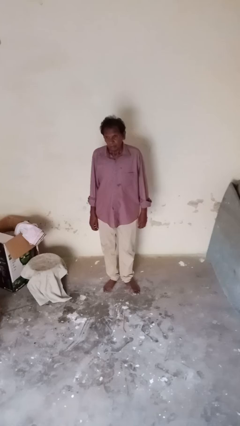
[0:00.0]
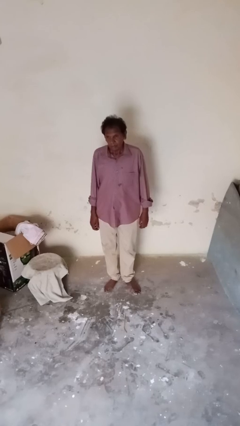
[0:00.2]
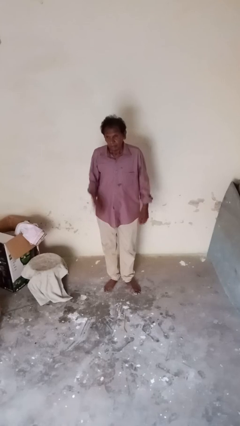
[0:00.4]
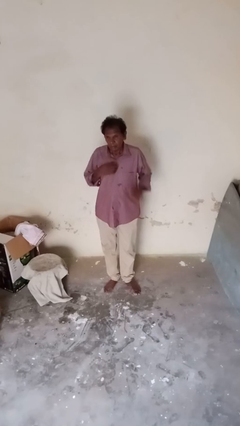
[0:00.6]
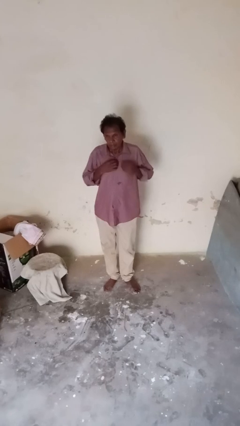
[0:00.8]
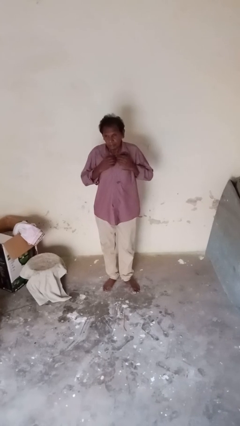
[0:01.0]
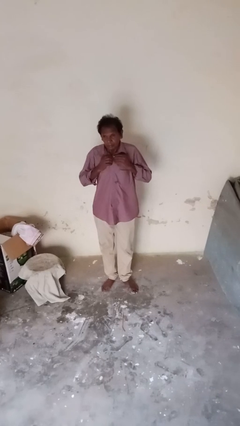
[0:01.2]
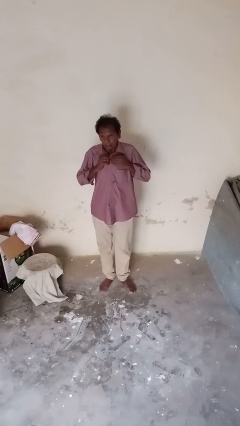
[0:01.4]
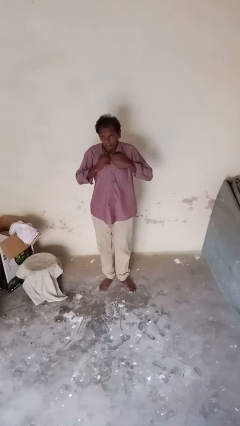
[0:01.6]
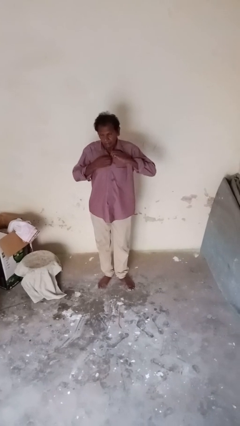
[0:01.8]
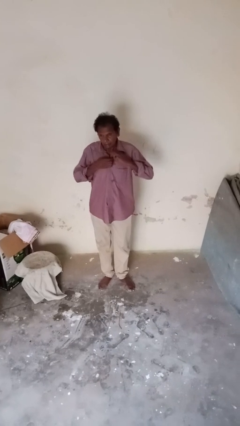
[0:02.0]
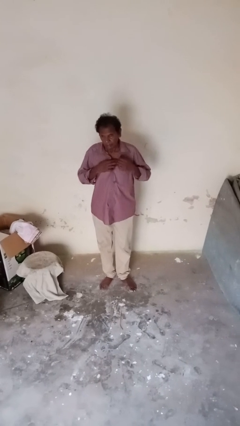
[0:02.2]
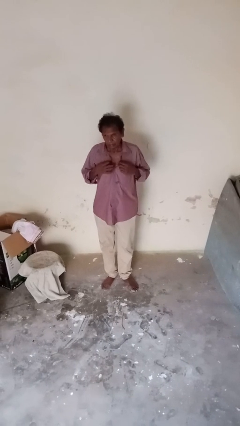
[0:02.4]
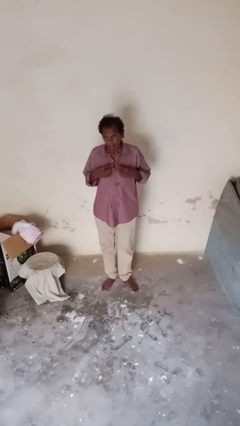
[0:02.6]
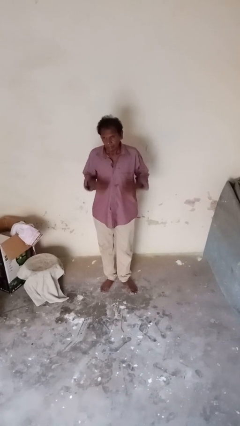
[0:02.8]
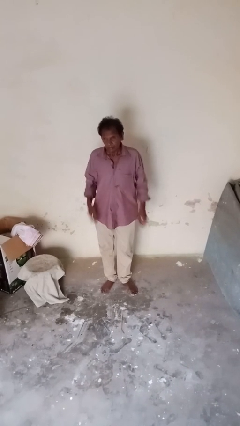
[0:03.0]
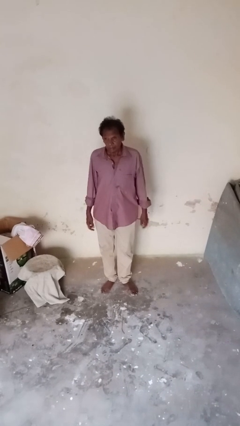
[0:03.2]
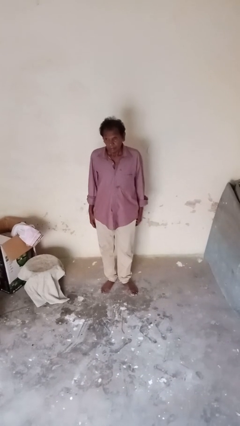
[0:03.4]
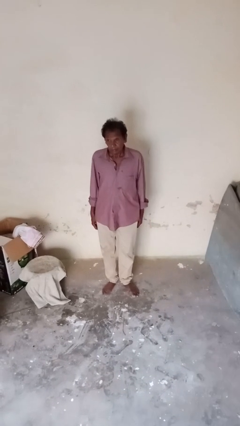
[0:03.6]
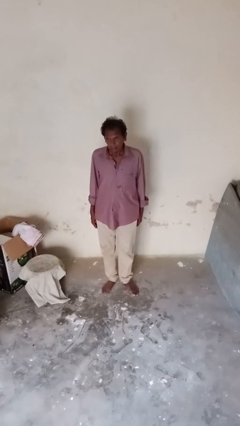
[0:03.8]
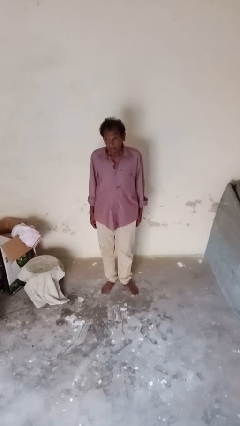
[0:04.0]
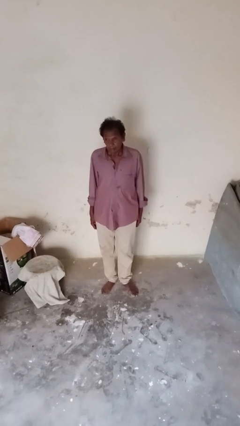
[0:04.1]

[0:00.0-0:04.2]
person unbuttons shirt

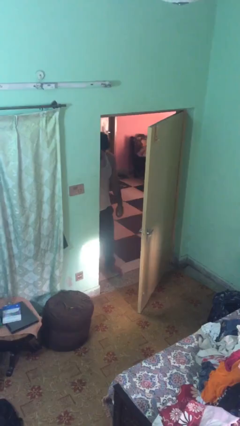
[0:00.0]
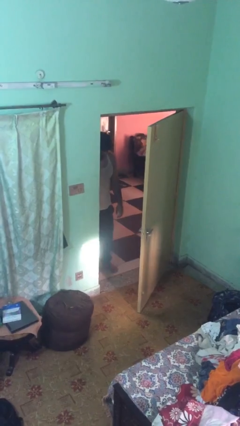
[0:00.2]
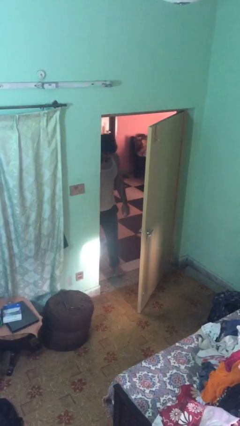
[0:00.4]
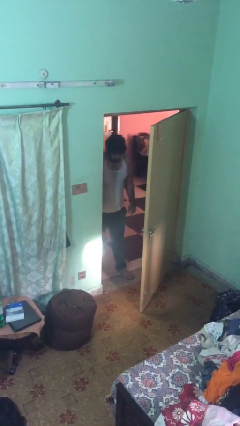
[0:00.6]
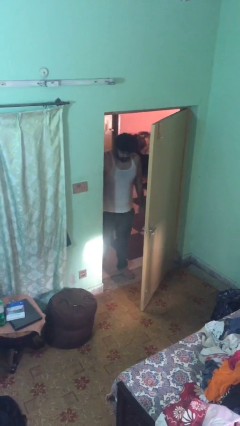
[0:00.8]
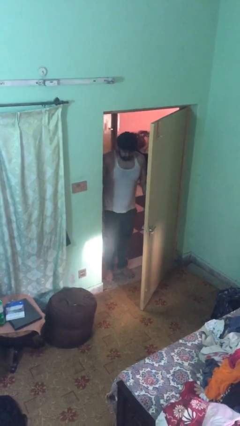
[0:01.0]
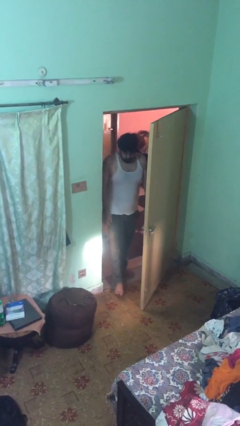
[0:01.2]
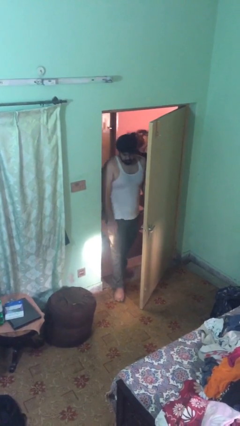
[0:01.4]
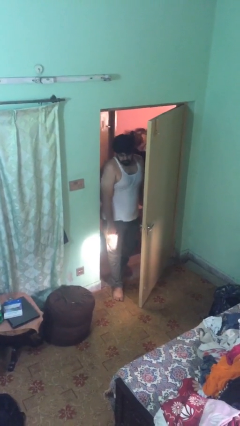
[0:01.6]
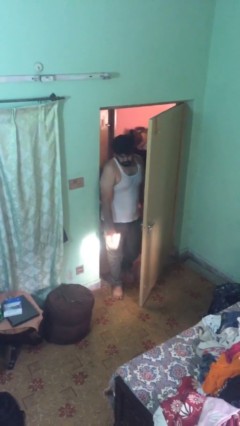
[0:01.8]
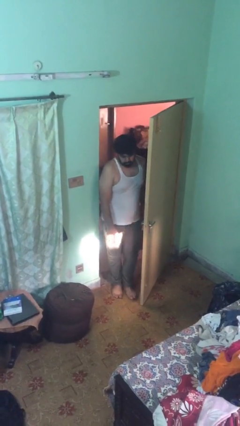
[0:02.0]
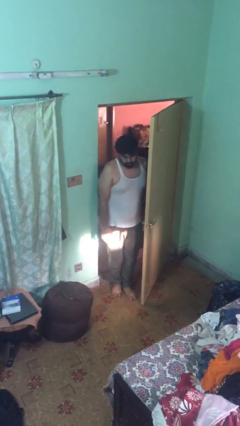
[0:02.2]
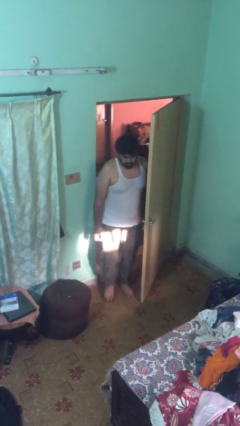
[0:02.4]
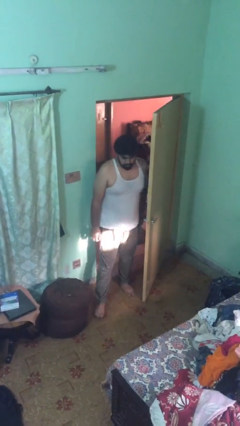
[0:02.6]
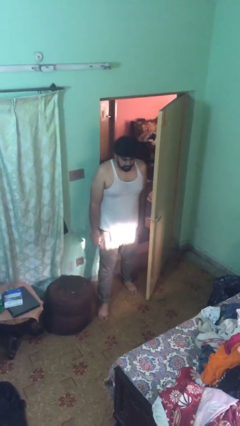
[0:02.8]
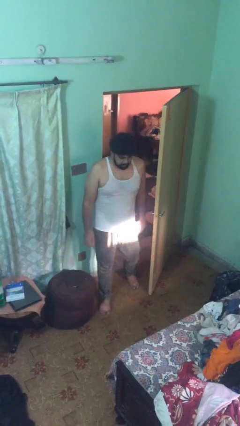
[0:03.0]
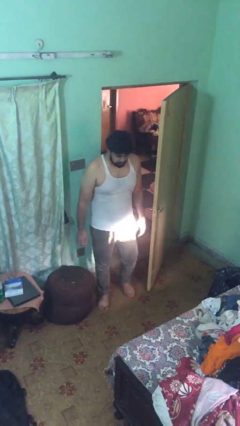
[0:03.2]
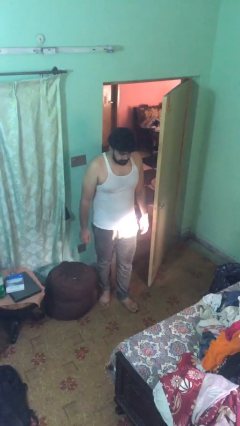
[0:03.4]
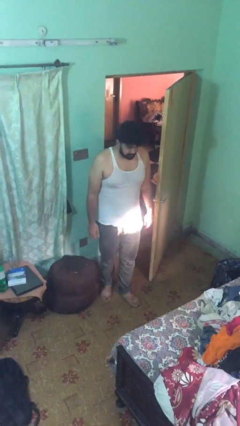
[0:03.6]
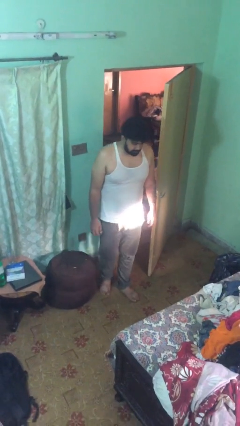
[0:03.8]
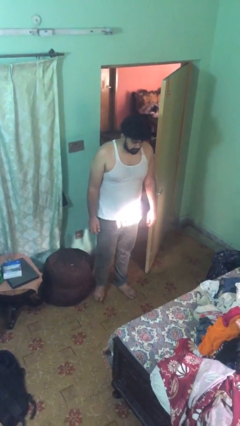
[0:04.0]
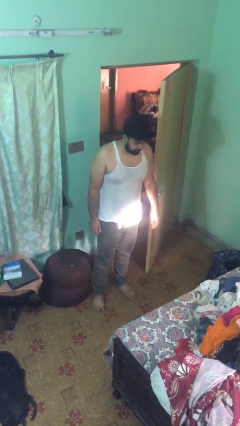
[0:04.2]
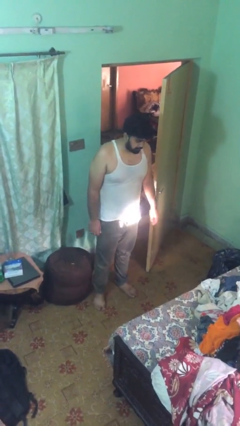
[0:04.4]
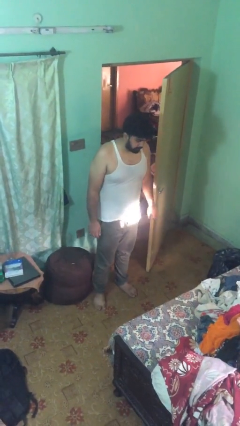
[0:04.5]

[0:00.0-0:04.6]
person enters scene through structure

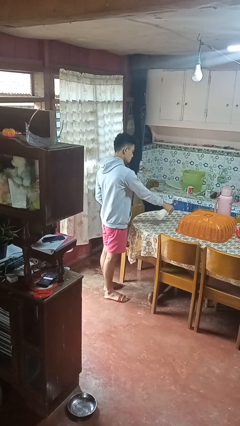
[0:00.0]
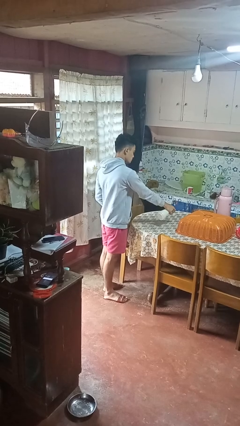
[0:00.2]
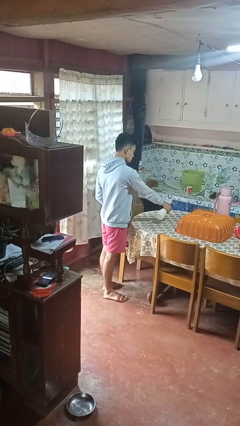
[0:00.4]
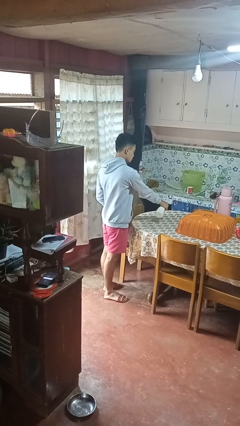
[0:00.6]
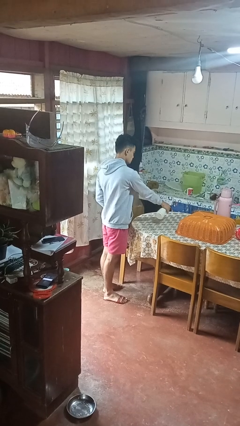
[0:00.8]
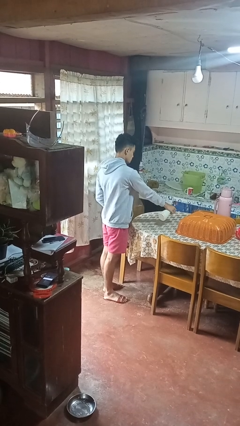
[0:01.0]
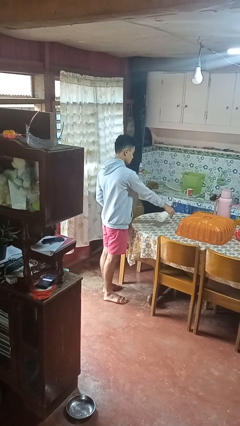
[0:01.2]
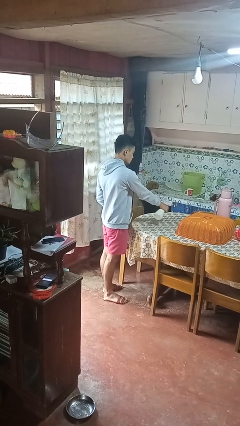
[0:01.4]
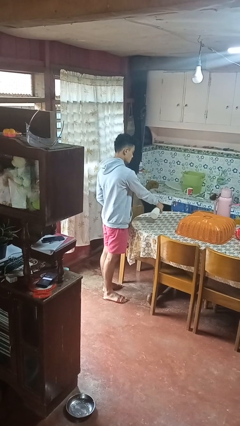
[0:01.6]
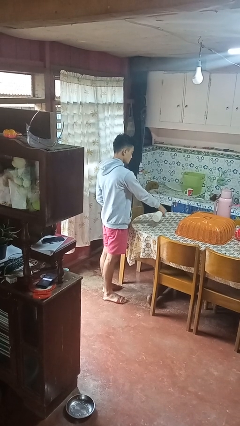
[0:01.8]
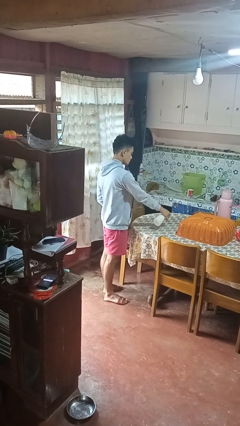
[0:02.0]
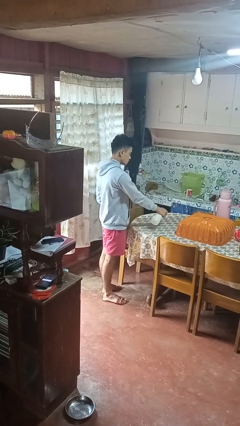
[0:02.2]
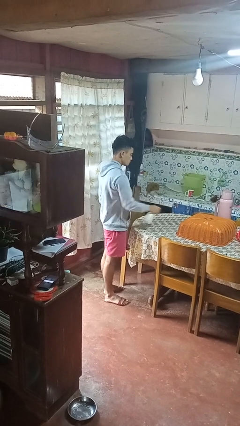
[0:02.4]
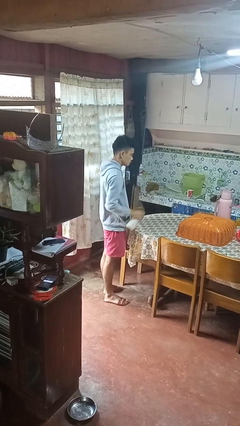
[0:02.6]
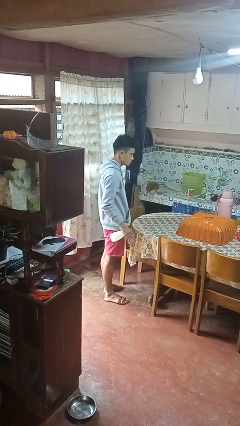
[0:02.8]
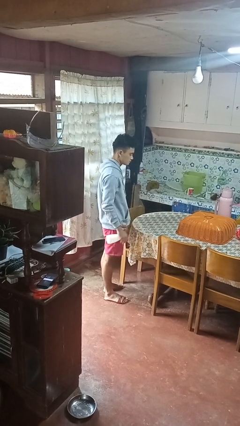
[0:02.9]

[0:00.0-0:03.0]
person sprays from bottle

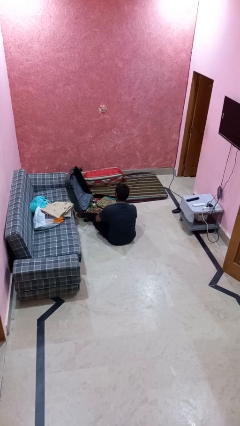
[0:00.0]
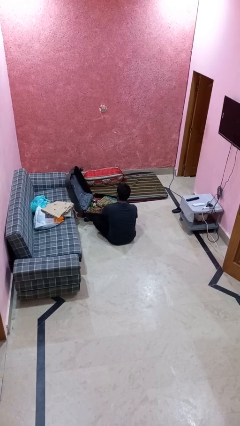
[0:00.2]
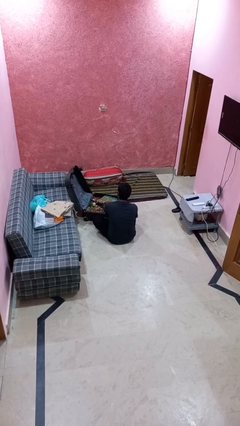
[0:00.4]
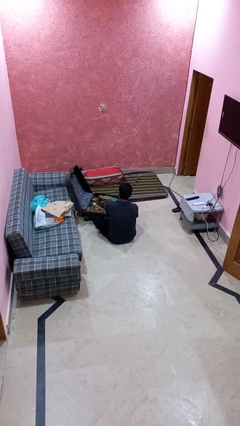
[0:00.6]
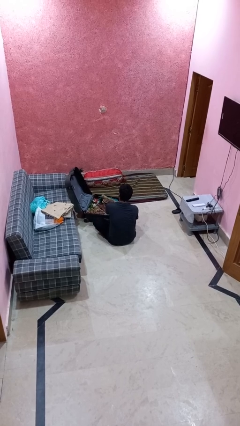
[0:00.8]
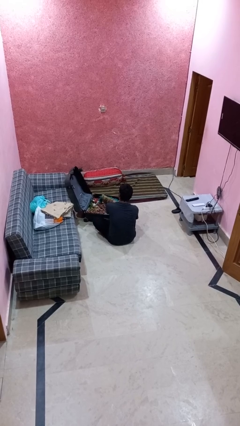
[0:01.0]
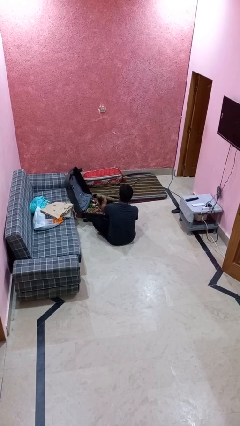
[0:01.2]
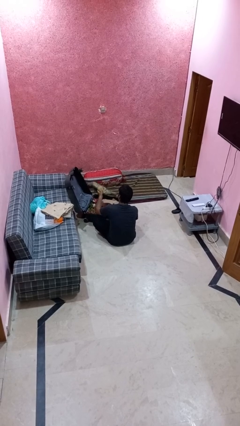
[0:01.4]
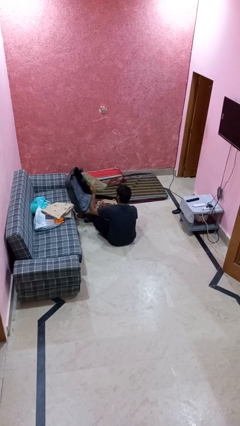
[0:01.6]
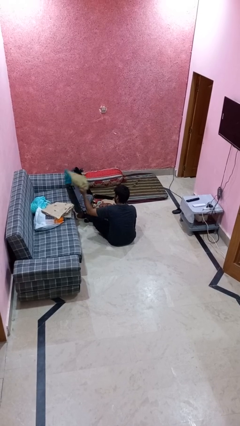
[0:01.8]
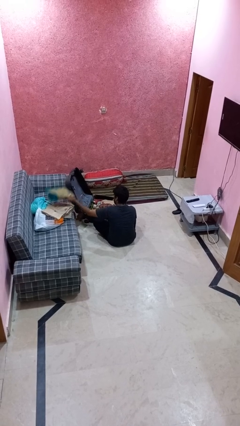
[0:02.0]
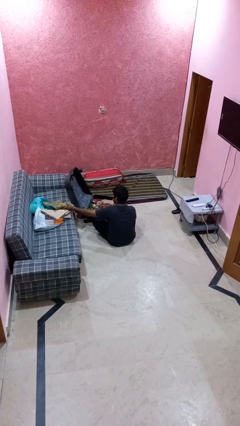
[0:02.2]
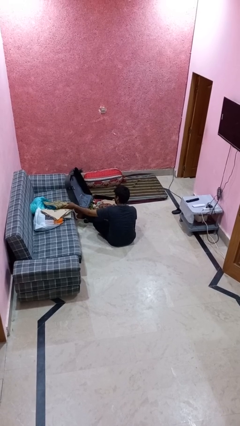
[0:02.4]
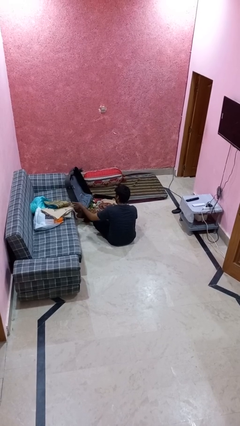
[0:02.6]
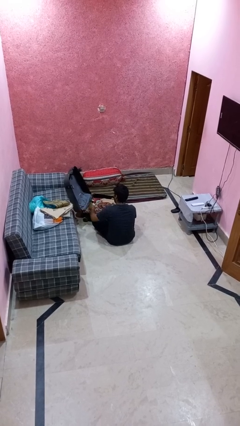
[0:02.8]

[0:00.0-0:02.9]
person unloads clothes from suitcase

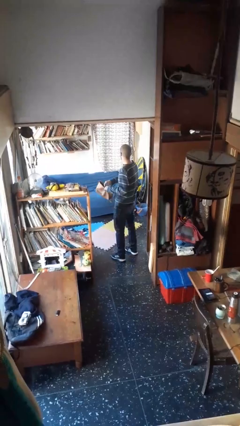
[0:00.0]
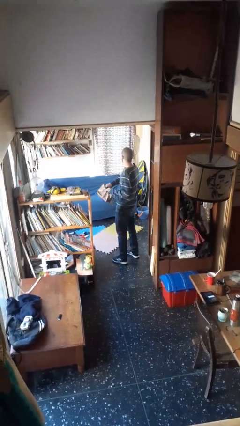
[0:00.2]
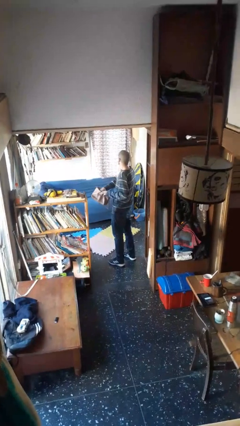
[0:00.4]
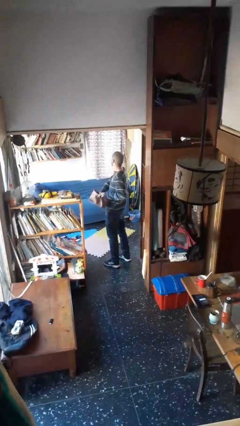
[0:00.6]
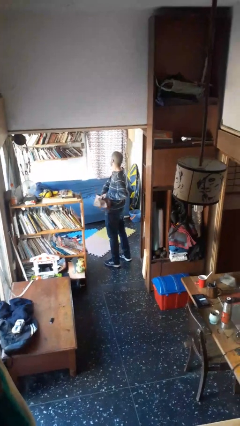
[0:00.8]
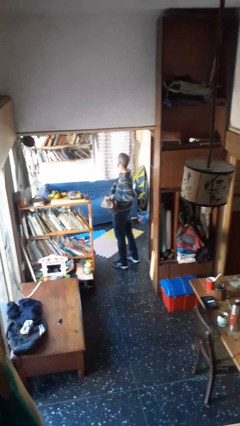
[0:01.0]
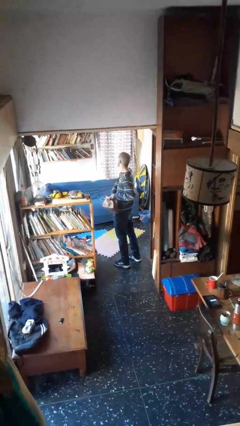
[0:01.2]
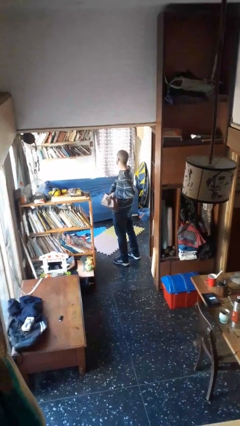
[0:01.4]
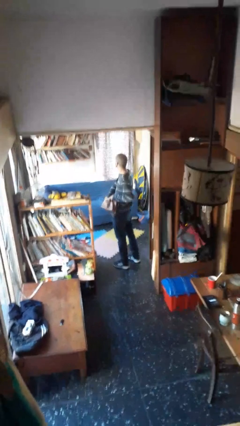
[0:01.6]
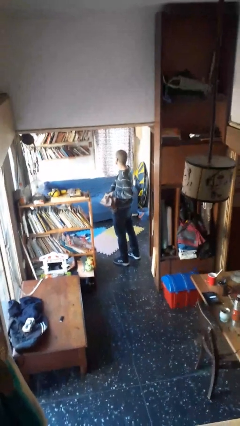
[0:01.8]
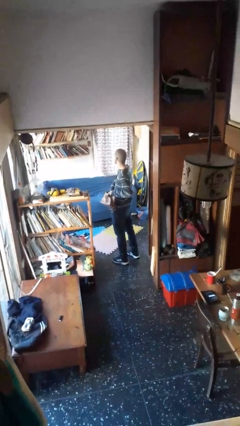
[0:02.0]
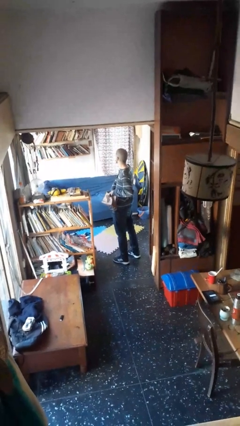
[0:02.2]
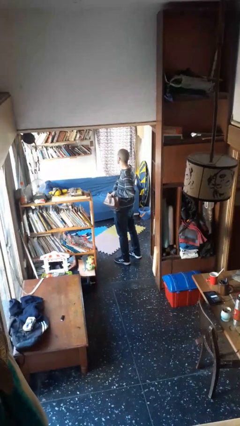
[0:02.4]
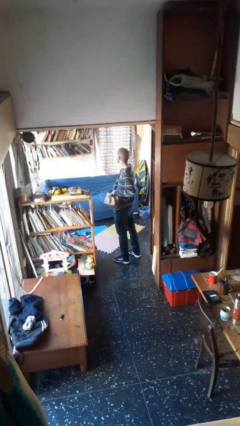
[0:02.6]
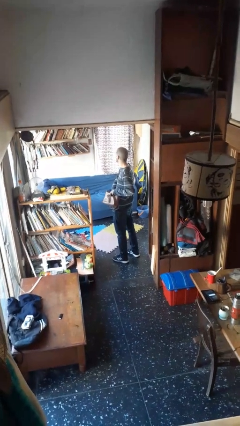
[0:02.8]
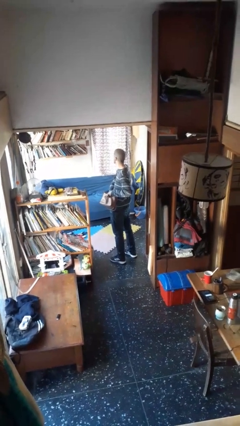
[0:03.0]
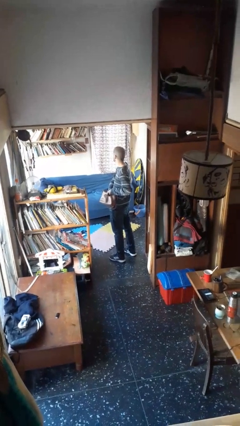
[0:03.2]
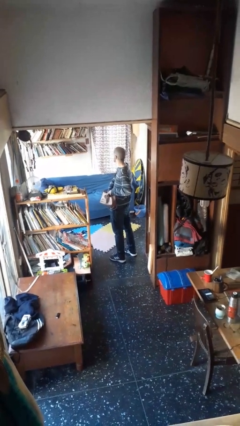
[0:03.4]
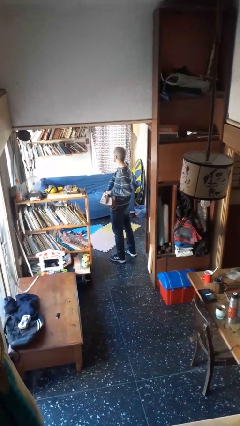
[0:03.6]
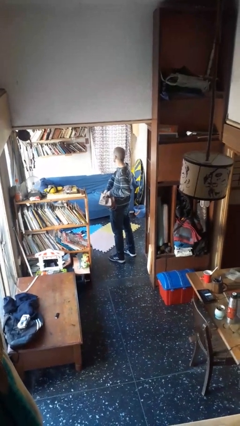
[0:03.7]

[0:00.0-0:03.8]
person searches in purse
